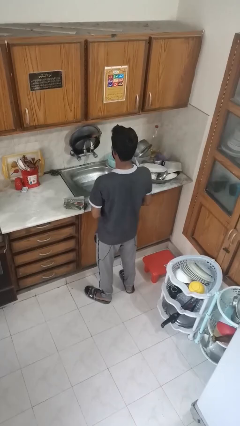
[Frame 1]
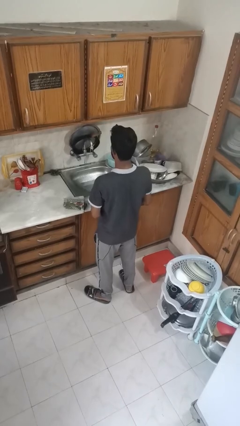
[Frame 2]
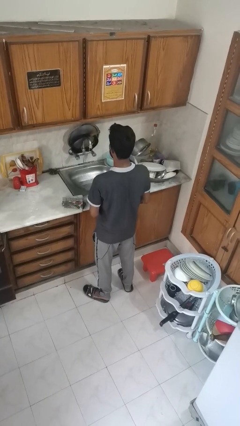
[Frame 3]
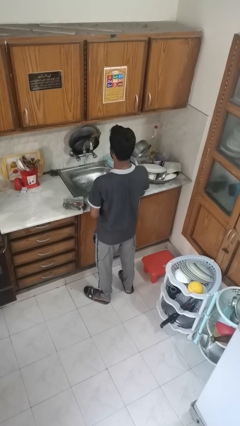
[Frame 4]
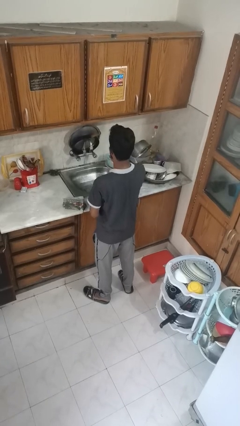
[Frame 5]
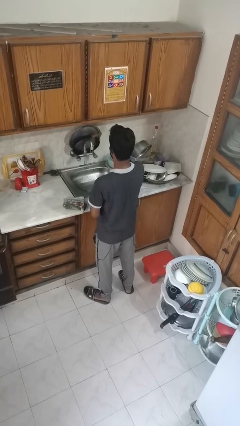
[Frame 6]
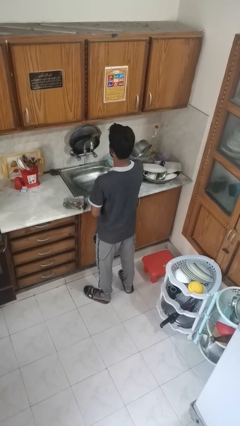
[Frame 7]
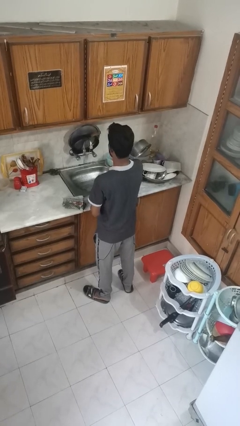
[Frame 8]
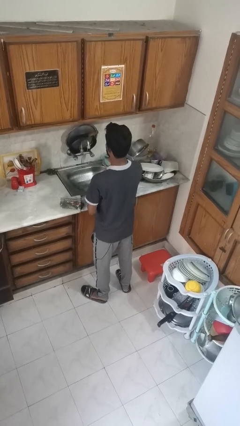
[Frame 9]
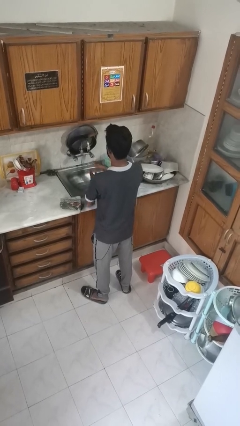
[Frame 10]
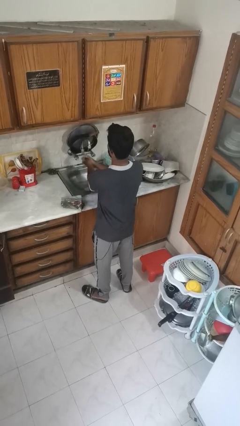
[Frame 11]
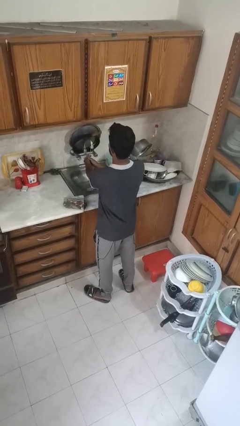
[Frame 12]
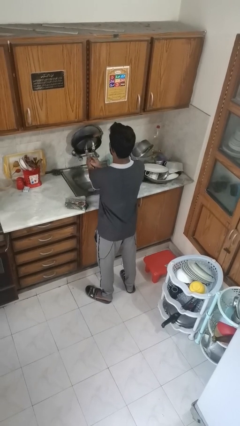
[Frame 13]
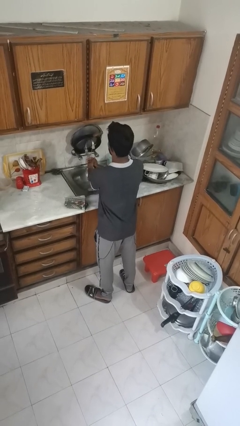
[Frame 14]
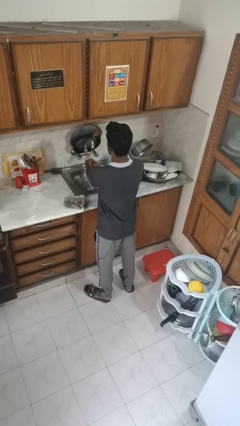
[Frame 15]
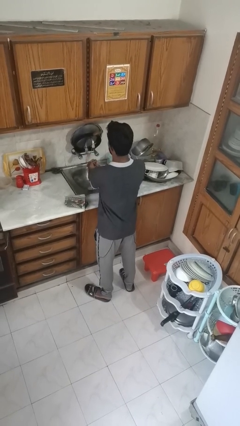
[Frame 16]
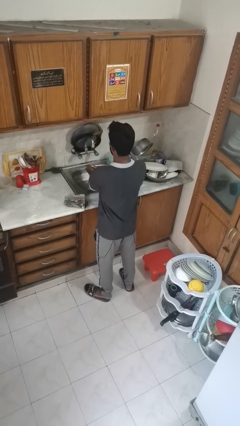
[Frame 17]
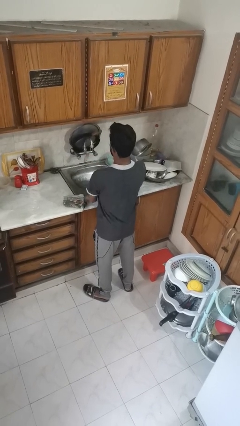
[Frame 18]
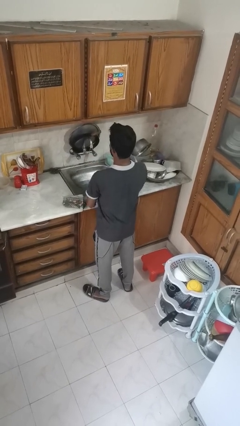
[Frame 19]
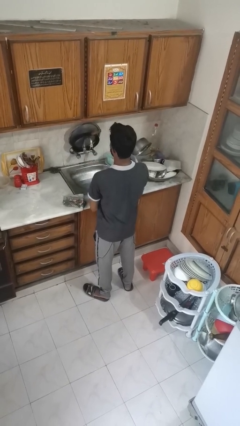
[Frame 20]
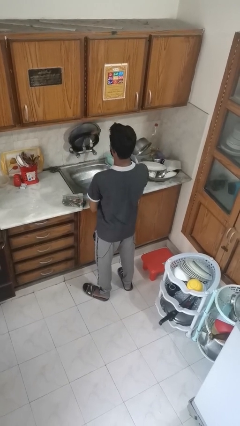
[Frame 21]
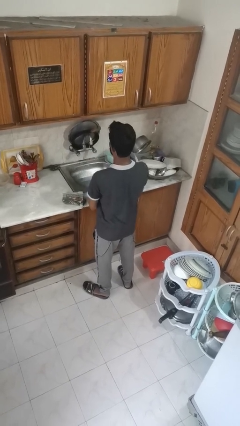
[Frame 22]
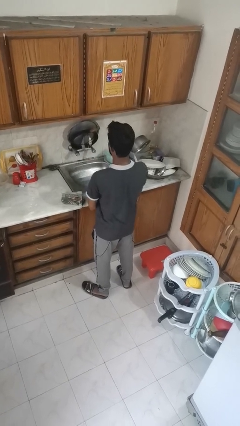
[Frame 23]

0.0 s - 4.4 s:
person washes hands

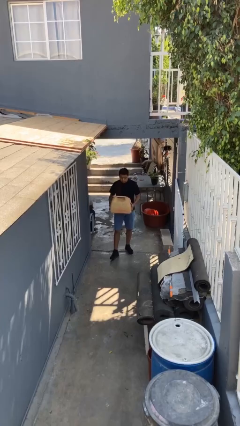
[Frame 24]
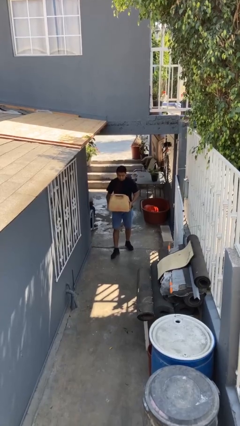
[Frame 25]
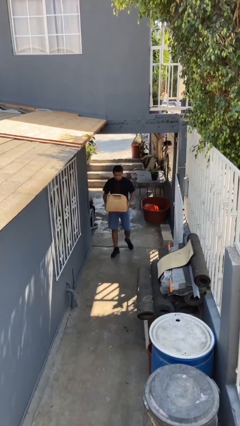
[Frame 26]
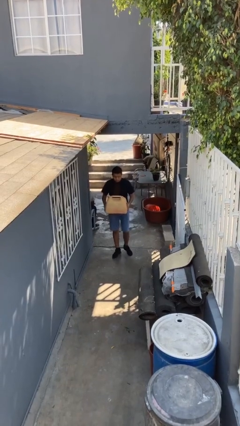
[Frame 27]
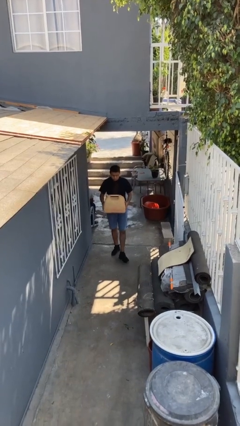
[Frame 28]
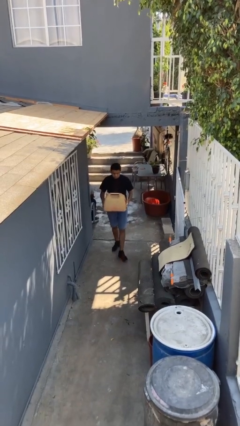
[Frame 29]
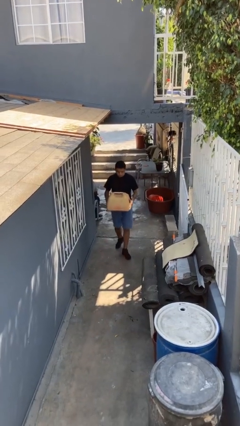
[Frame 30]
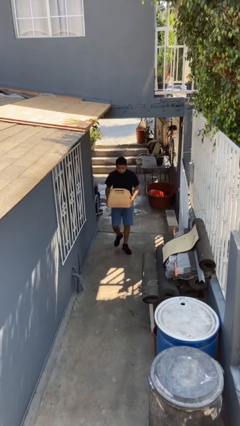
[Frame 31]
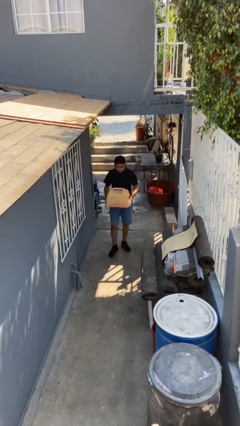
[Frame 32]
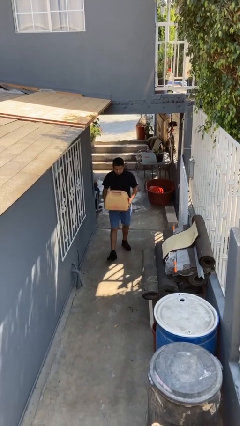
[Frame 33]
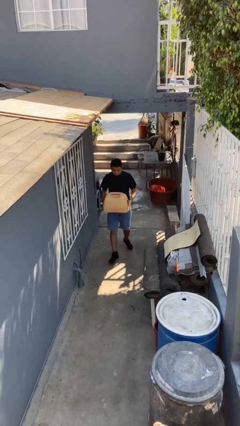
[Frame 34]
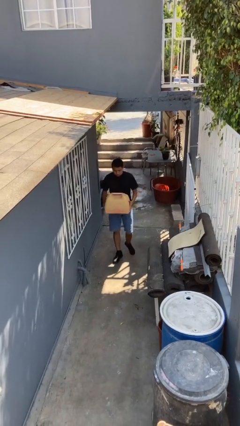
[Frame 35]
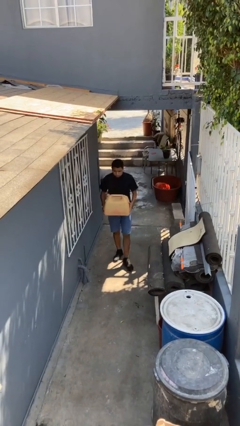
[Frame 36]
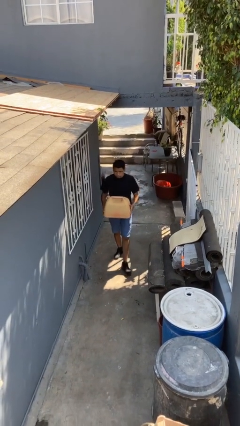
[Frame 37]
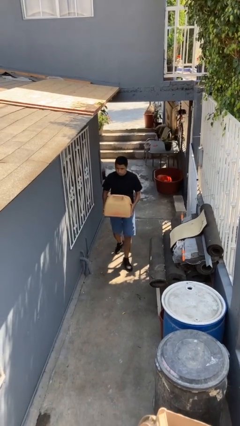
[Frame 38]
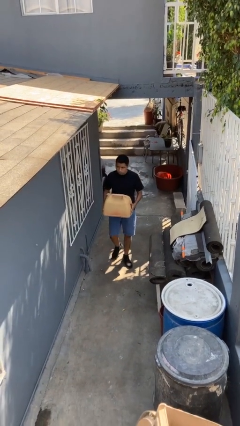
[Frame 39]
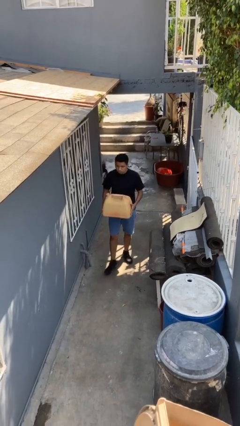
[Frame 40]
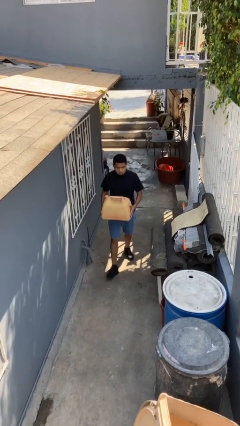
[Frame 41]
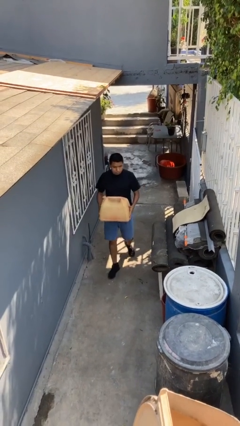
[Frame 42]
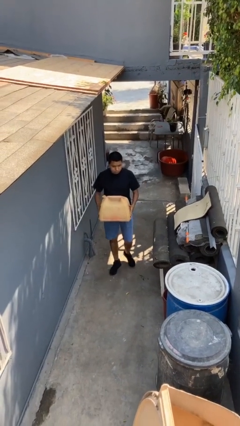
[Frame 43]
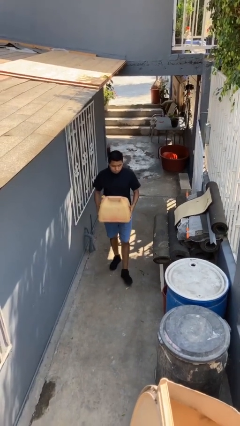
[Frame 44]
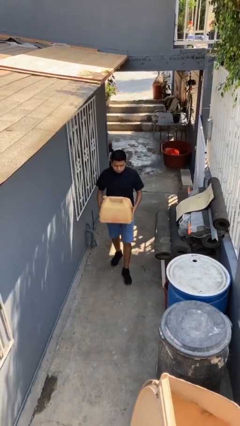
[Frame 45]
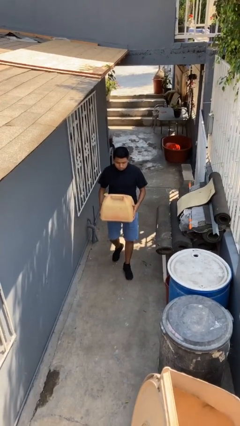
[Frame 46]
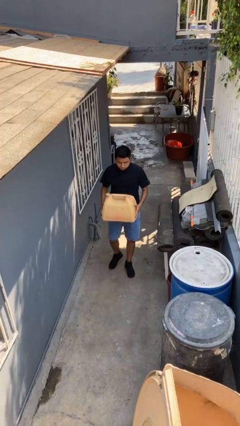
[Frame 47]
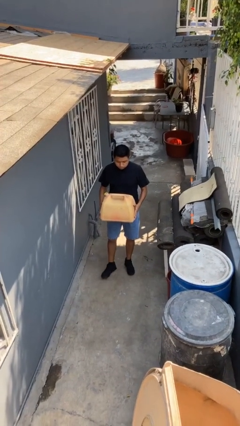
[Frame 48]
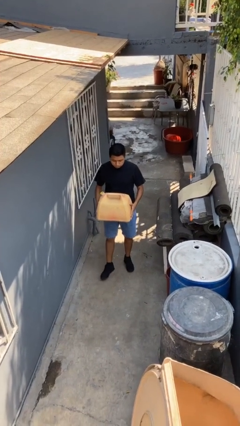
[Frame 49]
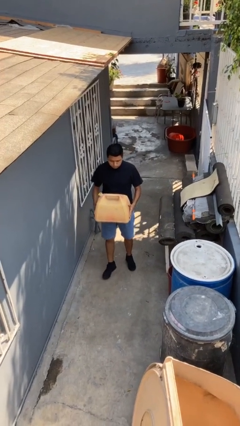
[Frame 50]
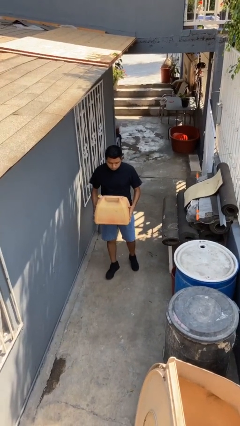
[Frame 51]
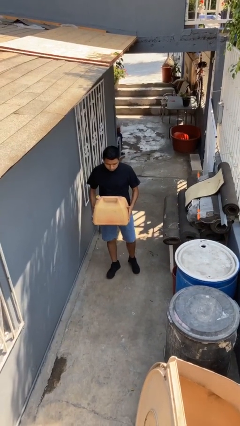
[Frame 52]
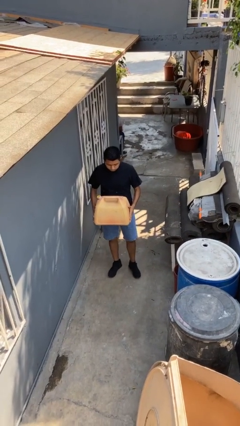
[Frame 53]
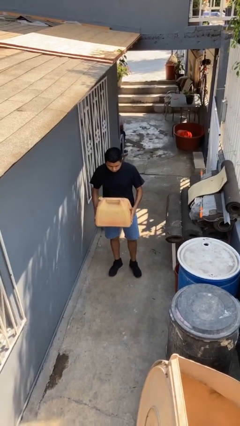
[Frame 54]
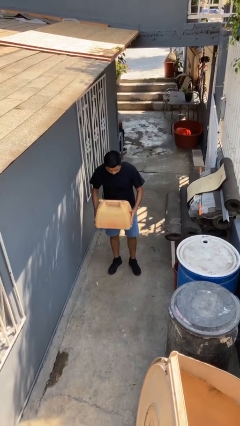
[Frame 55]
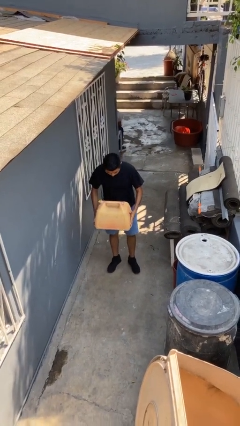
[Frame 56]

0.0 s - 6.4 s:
person carries heavy object

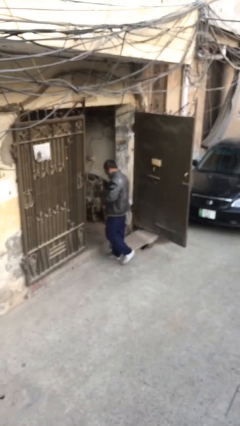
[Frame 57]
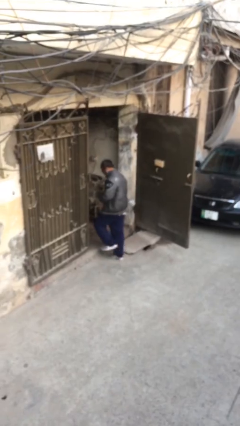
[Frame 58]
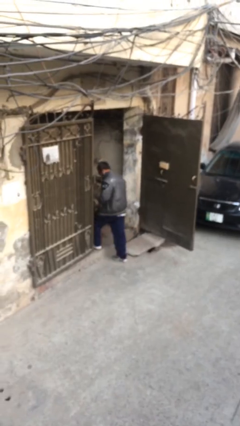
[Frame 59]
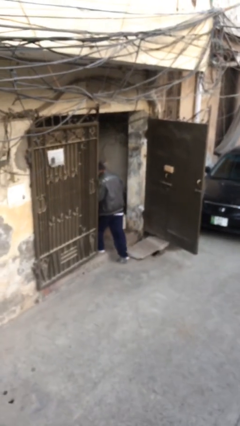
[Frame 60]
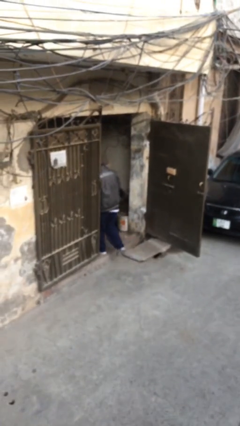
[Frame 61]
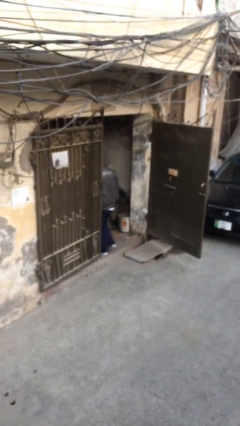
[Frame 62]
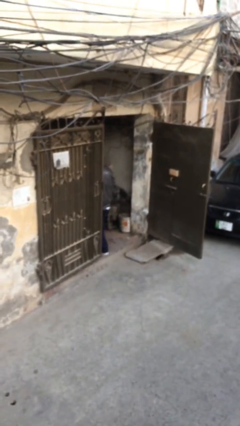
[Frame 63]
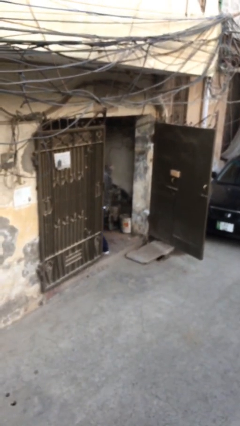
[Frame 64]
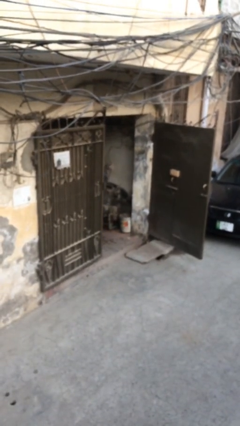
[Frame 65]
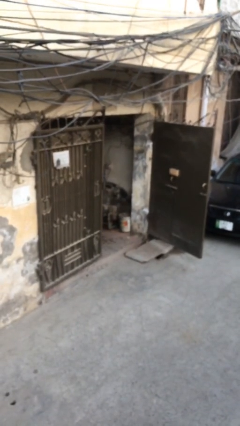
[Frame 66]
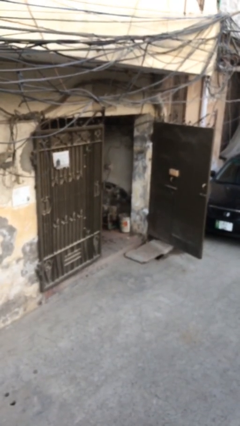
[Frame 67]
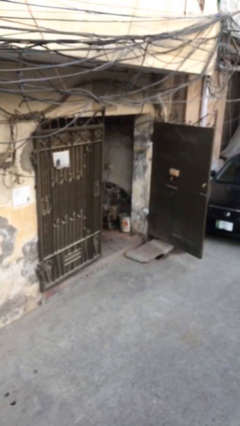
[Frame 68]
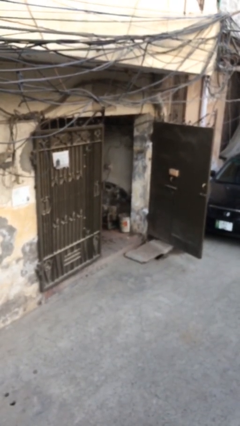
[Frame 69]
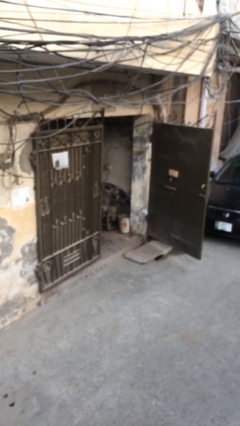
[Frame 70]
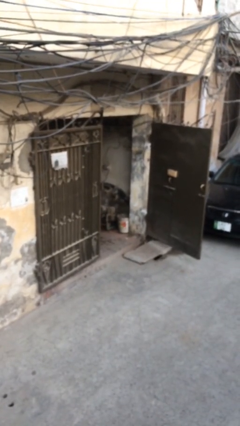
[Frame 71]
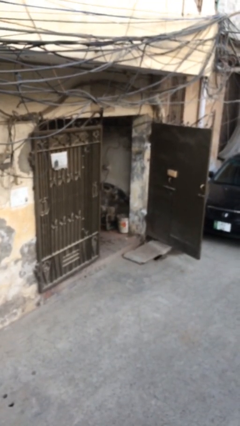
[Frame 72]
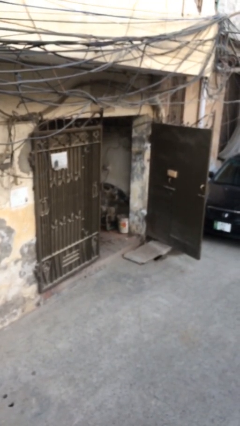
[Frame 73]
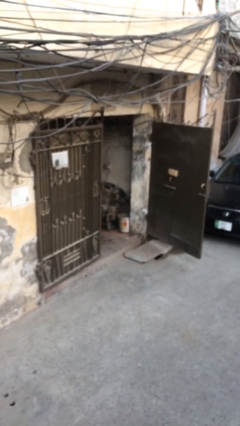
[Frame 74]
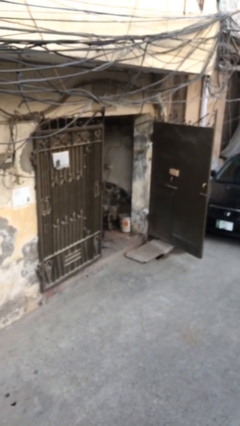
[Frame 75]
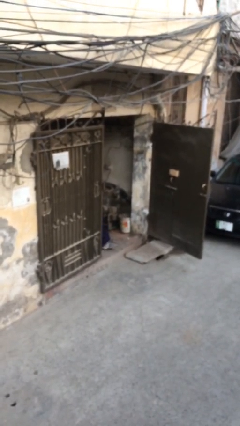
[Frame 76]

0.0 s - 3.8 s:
person exits scene through structure

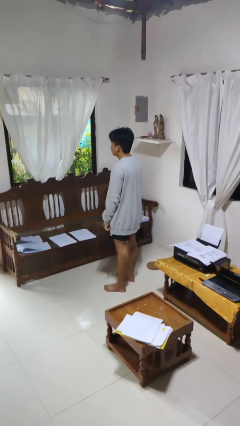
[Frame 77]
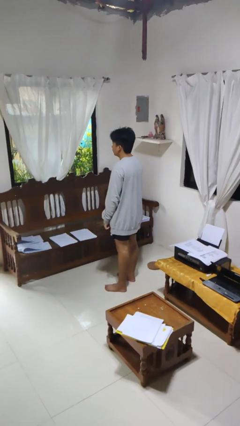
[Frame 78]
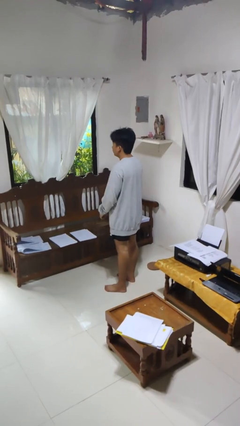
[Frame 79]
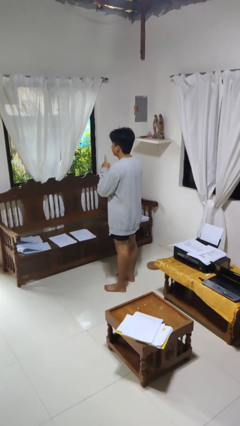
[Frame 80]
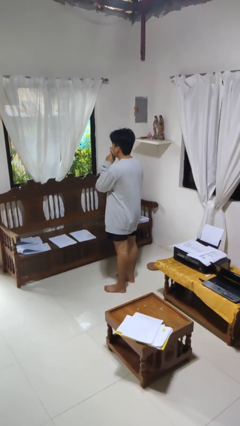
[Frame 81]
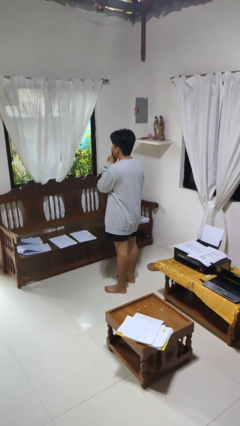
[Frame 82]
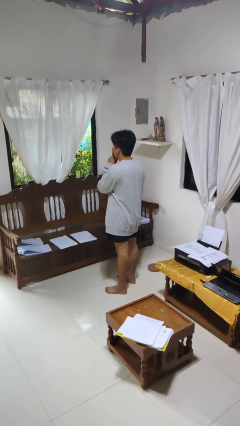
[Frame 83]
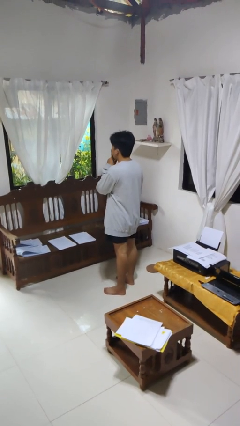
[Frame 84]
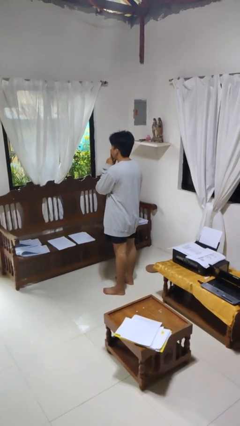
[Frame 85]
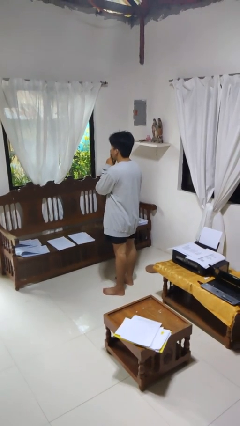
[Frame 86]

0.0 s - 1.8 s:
person gestures be quiet

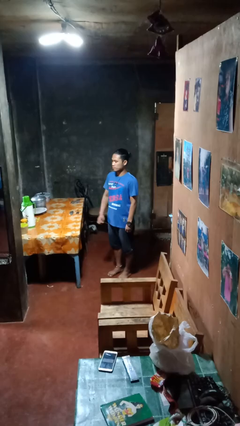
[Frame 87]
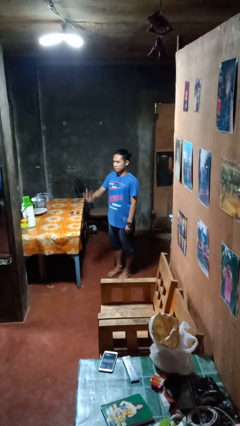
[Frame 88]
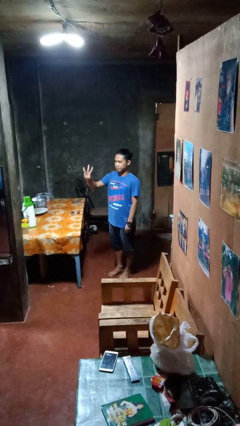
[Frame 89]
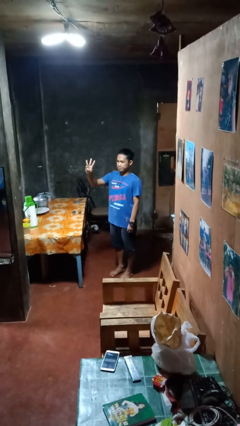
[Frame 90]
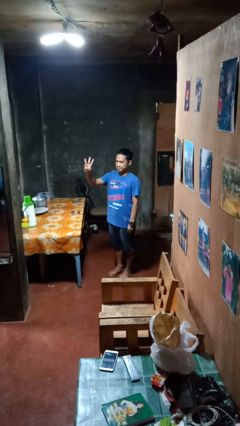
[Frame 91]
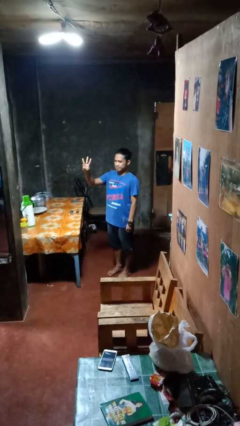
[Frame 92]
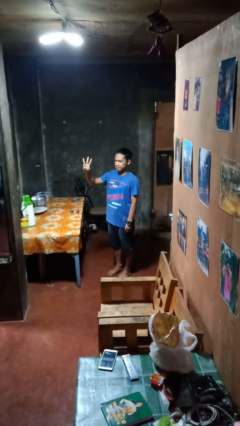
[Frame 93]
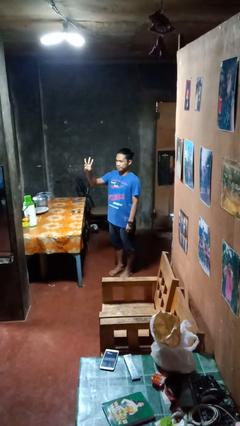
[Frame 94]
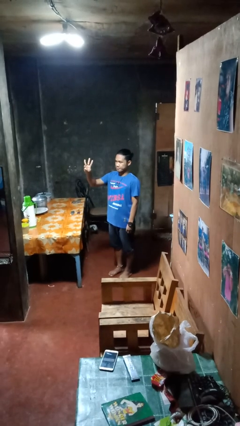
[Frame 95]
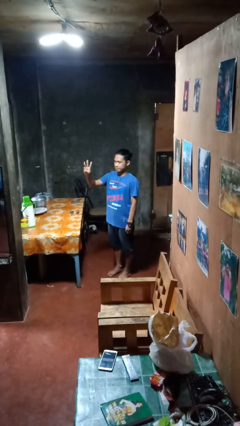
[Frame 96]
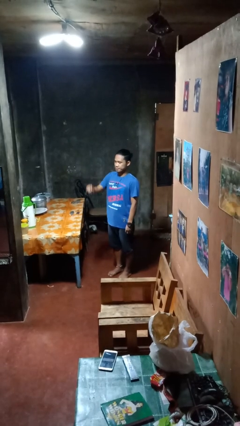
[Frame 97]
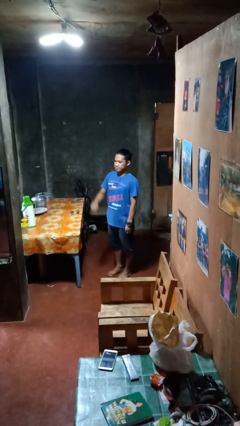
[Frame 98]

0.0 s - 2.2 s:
person gestures number three
